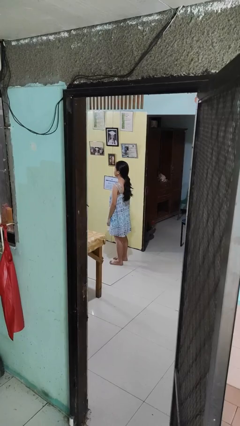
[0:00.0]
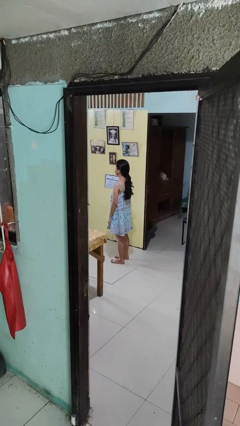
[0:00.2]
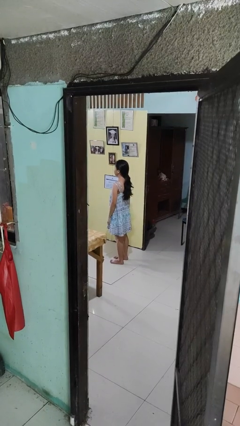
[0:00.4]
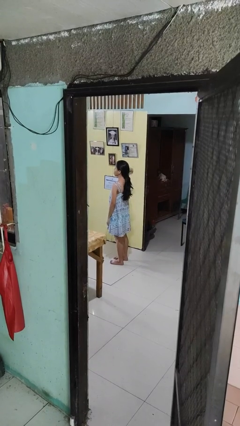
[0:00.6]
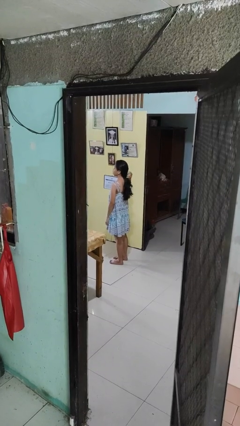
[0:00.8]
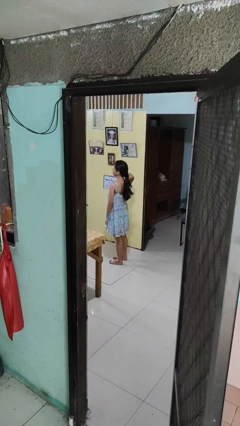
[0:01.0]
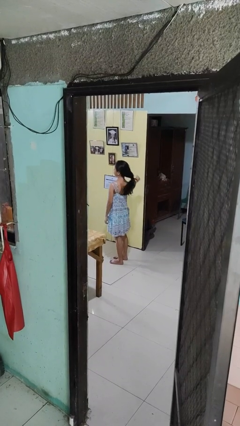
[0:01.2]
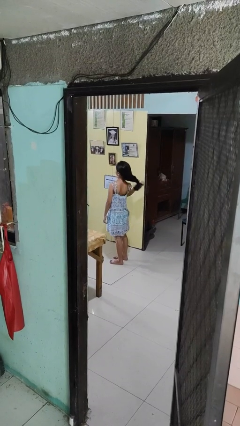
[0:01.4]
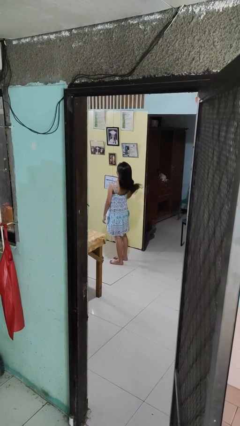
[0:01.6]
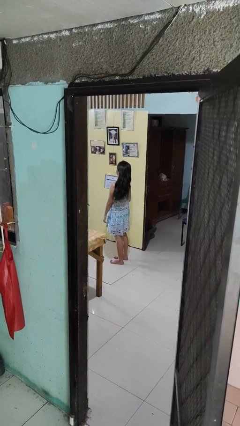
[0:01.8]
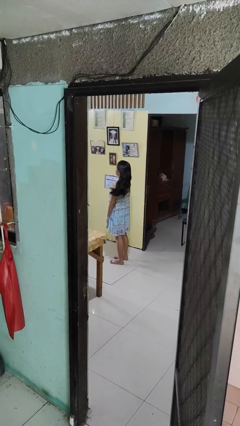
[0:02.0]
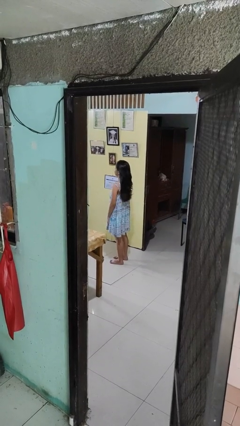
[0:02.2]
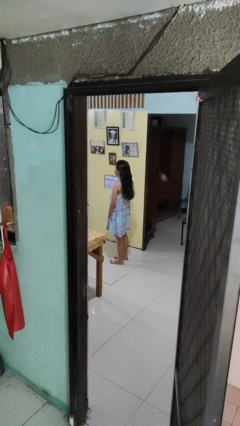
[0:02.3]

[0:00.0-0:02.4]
person takes off hairtie

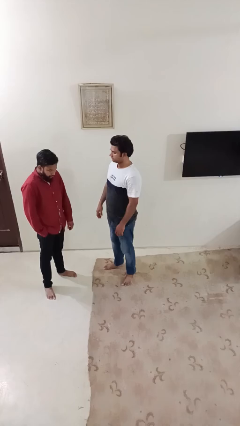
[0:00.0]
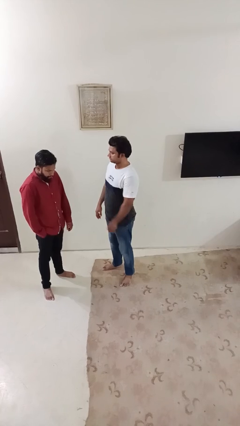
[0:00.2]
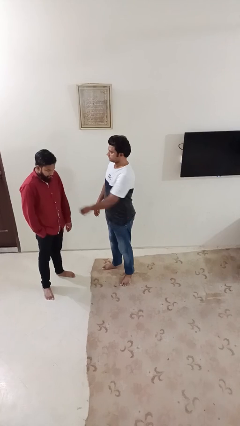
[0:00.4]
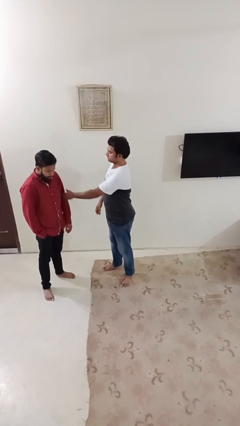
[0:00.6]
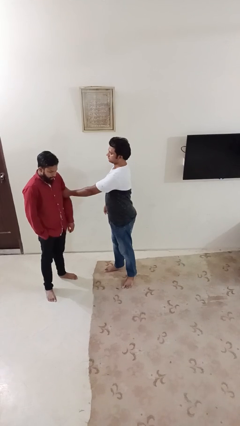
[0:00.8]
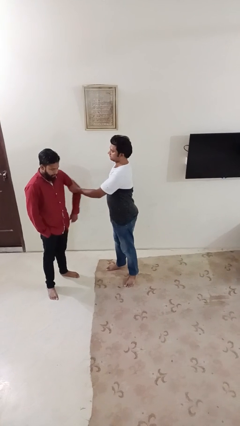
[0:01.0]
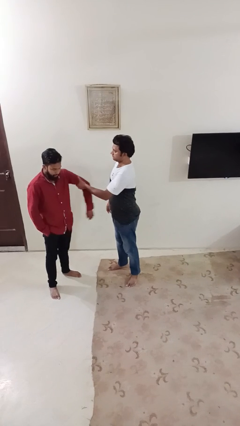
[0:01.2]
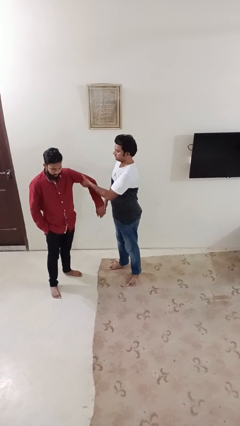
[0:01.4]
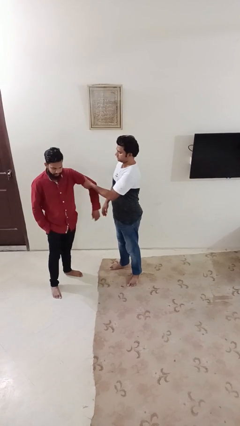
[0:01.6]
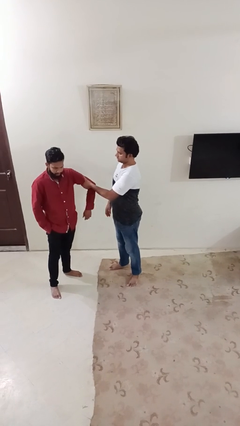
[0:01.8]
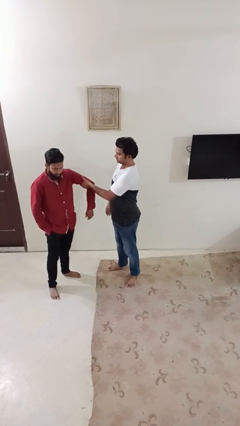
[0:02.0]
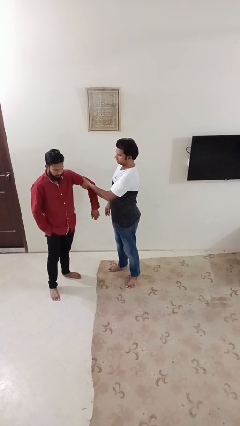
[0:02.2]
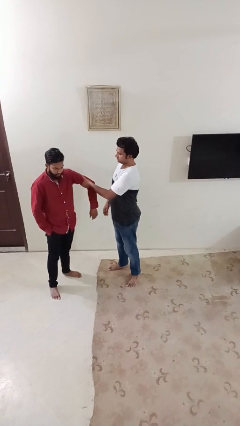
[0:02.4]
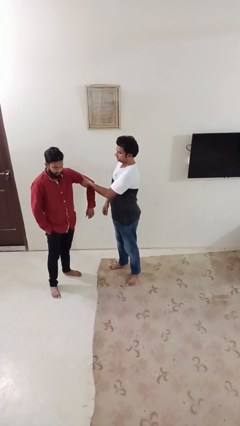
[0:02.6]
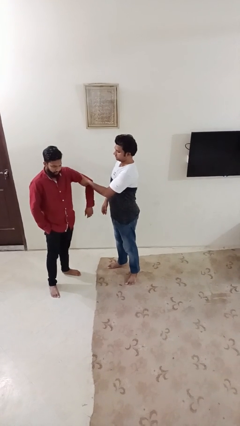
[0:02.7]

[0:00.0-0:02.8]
person grabs person by bicep

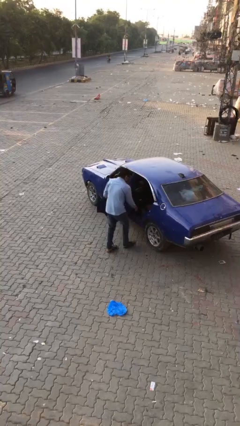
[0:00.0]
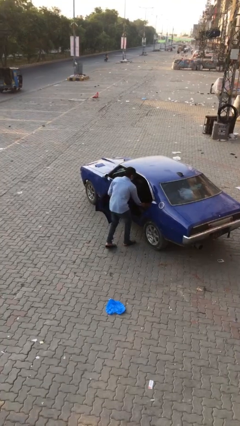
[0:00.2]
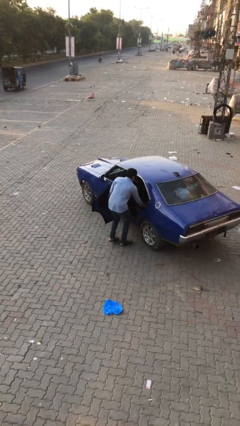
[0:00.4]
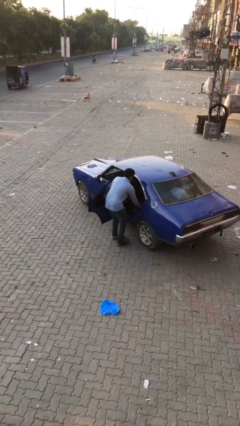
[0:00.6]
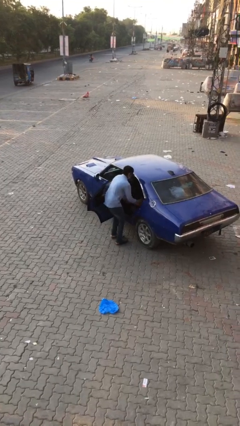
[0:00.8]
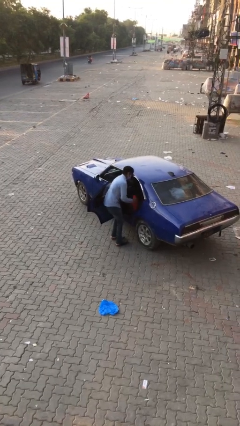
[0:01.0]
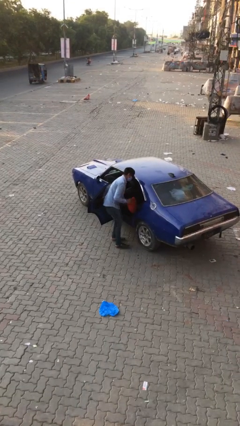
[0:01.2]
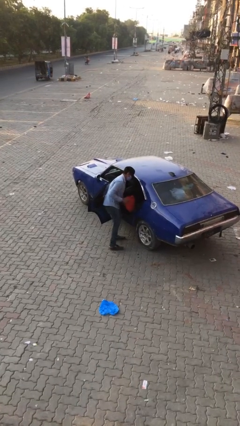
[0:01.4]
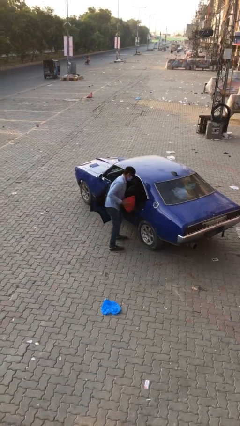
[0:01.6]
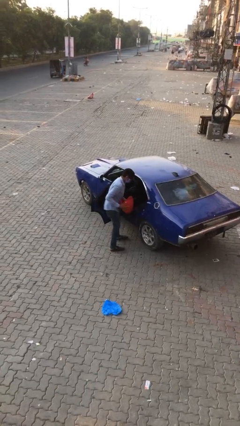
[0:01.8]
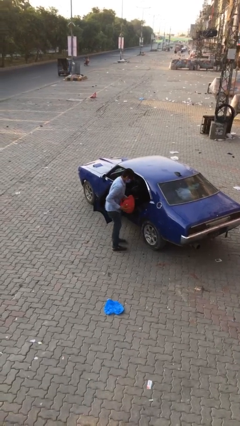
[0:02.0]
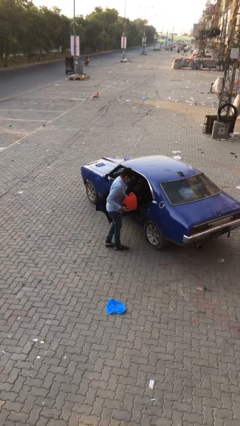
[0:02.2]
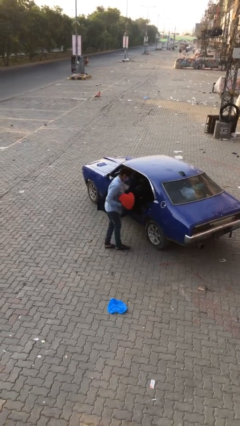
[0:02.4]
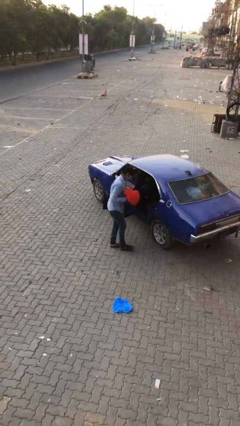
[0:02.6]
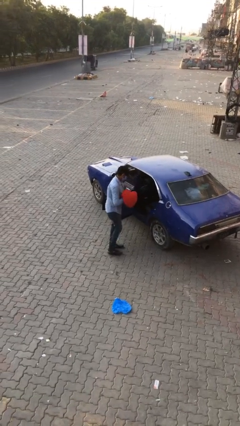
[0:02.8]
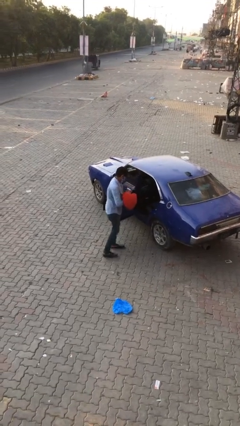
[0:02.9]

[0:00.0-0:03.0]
person unloads car

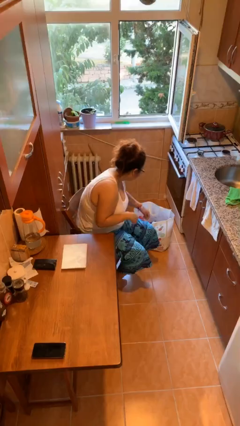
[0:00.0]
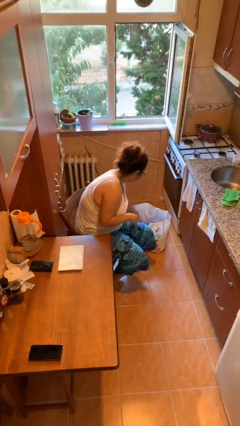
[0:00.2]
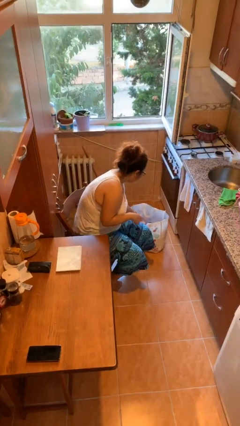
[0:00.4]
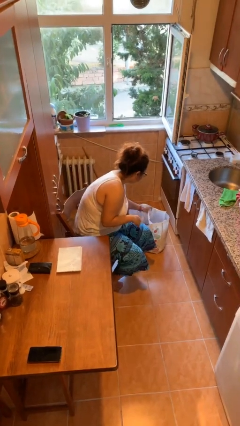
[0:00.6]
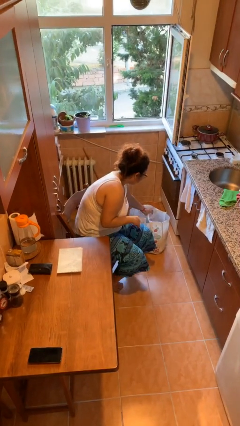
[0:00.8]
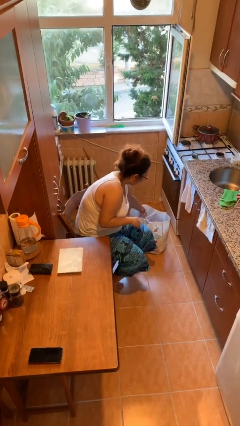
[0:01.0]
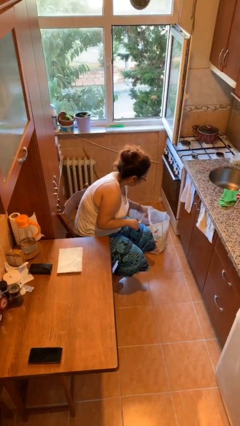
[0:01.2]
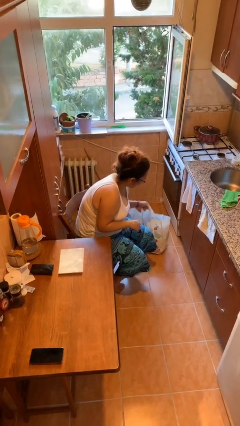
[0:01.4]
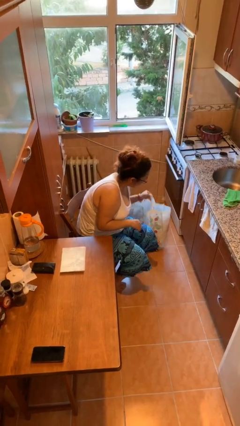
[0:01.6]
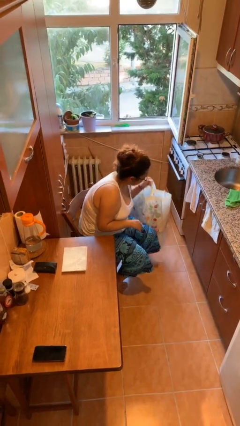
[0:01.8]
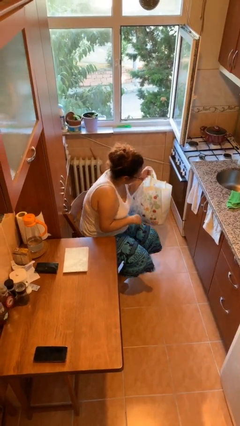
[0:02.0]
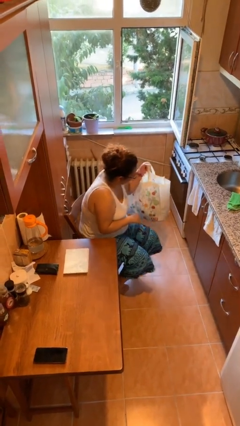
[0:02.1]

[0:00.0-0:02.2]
person picks up object from floor

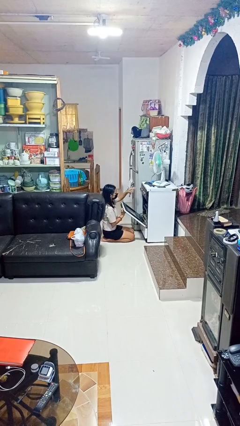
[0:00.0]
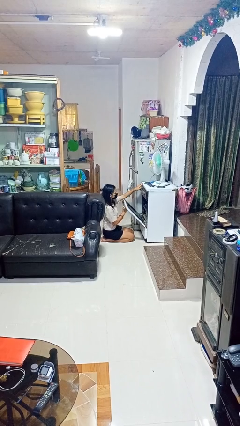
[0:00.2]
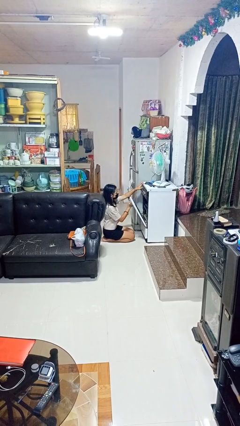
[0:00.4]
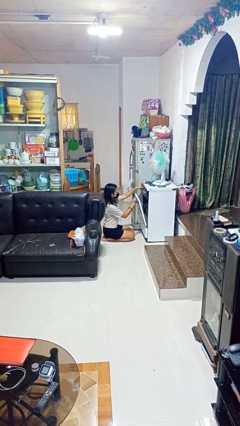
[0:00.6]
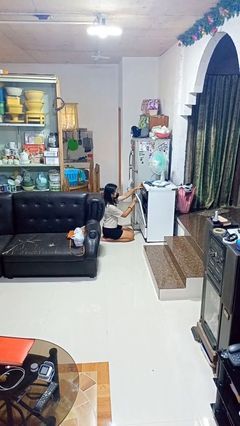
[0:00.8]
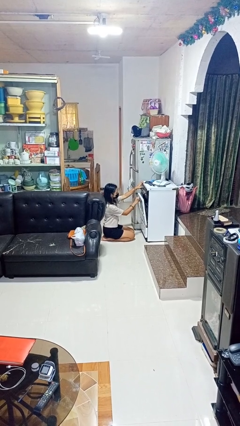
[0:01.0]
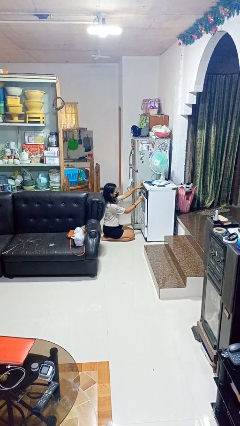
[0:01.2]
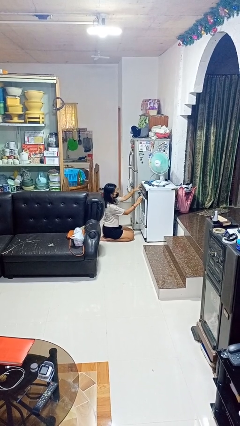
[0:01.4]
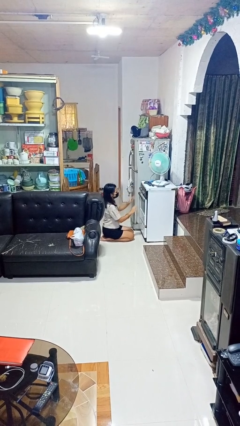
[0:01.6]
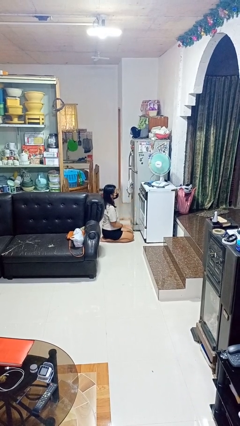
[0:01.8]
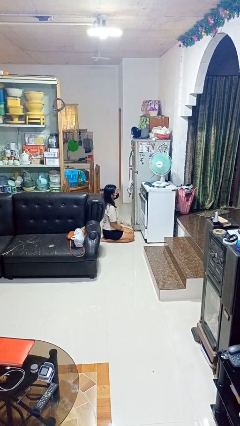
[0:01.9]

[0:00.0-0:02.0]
person closes oven door

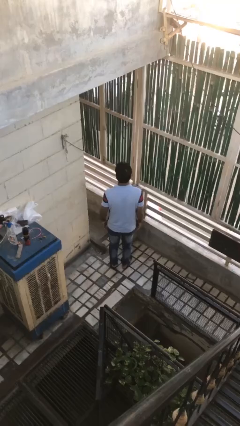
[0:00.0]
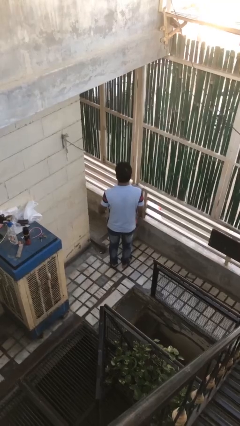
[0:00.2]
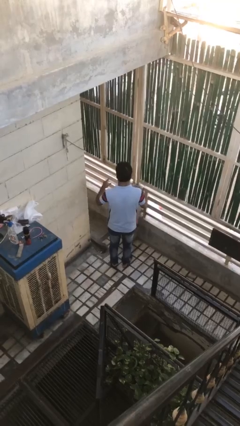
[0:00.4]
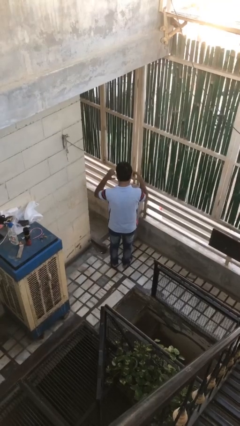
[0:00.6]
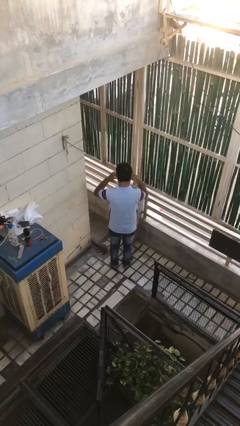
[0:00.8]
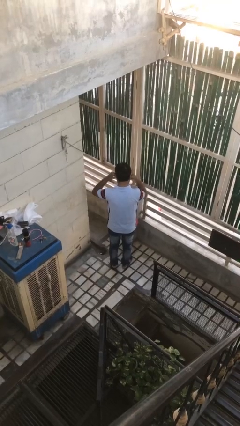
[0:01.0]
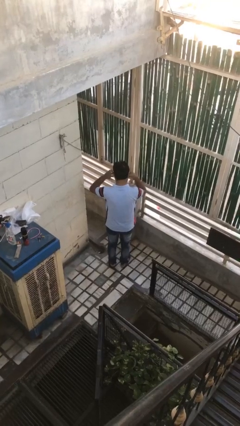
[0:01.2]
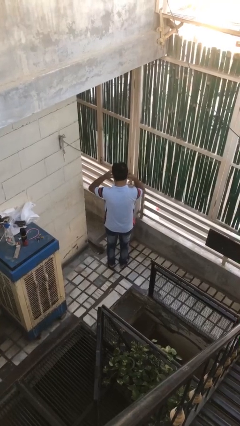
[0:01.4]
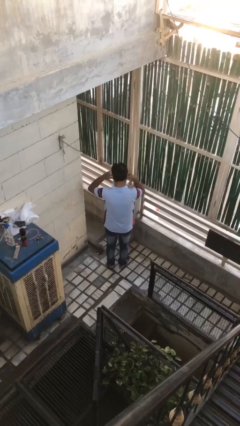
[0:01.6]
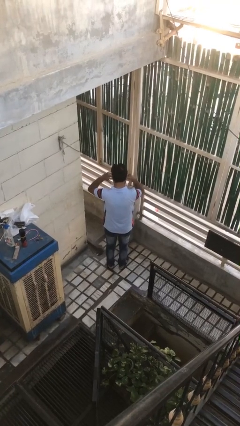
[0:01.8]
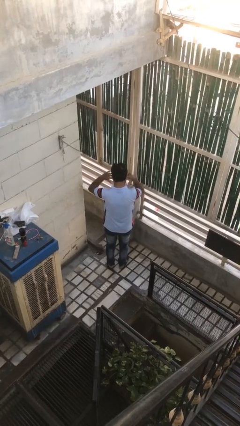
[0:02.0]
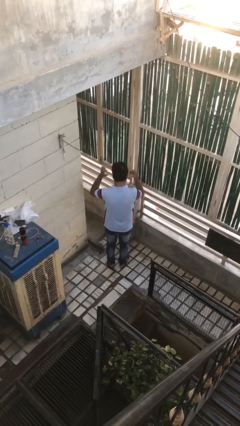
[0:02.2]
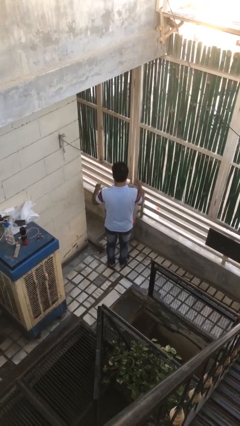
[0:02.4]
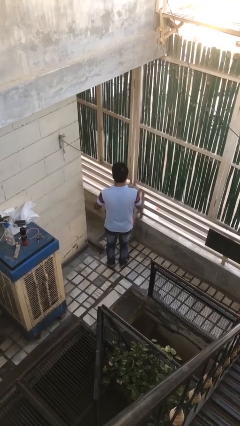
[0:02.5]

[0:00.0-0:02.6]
person puts fingers in ear

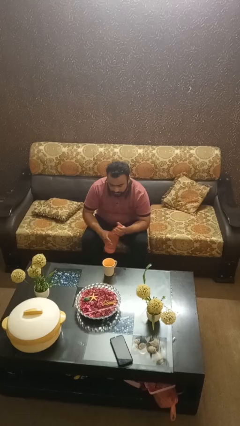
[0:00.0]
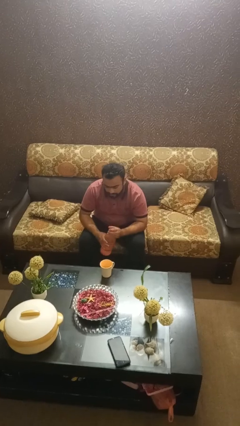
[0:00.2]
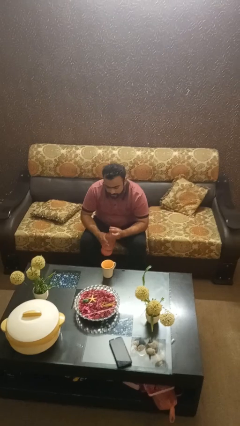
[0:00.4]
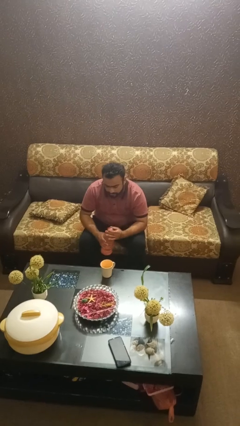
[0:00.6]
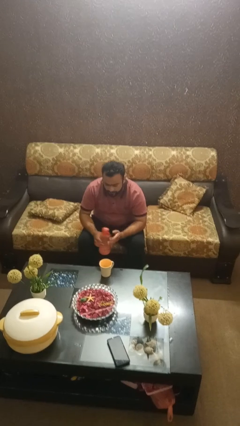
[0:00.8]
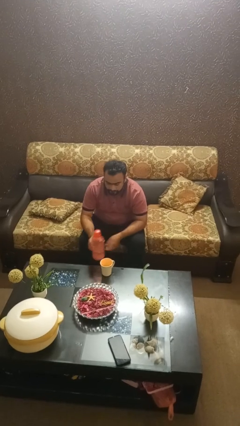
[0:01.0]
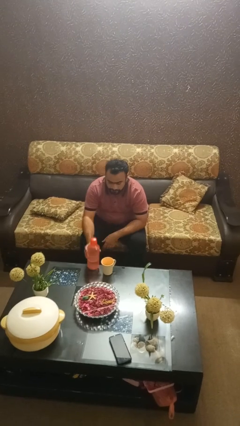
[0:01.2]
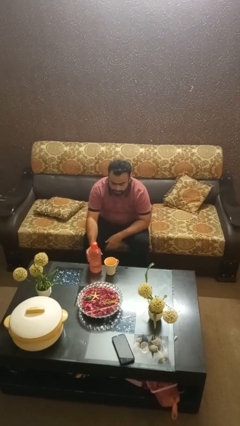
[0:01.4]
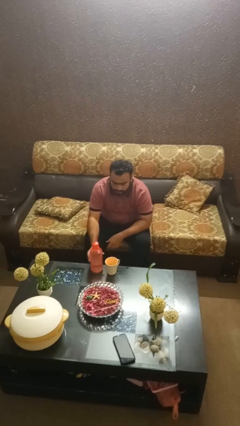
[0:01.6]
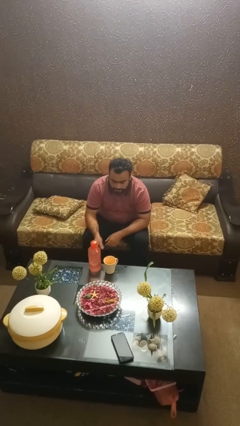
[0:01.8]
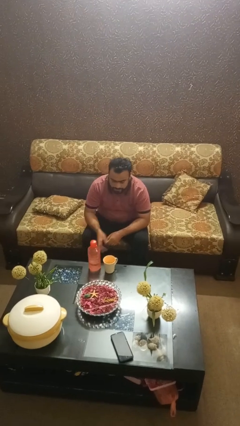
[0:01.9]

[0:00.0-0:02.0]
person screws lid to bottle
